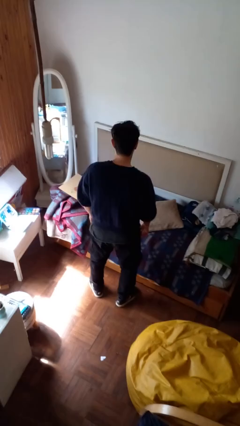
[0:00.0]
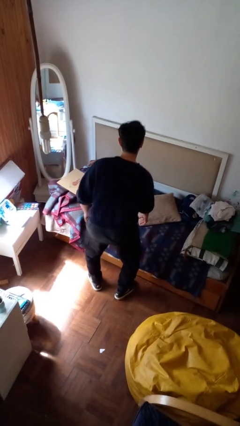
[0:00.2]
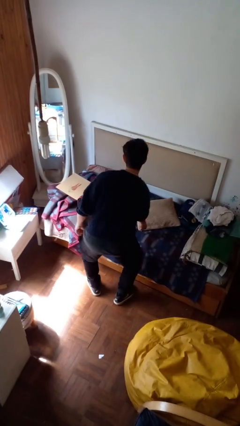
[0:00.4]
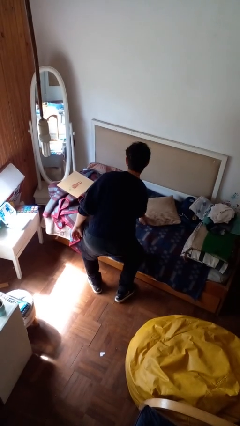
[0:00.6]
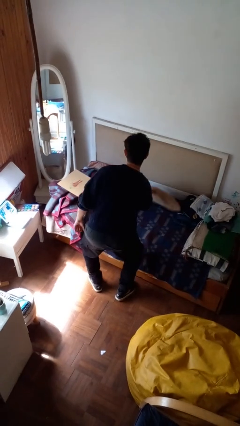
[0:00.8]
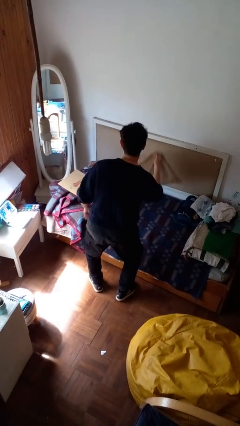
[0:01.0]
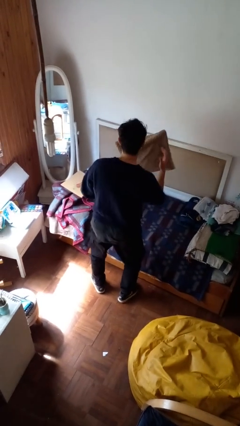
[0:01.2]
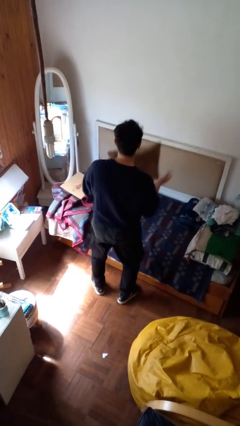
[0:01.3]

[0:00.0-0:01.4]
person picks up object from bed

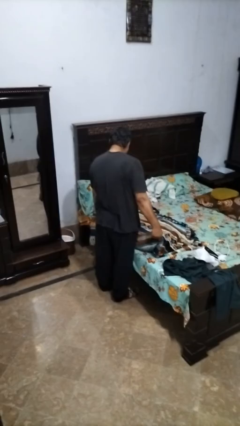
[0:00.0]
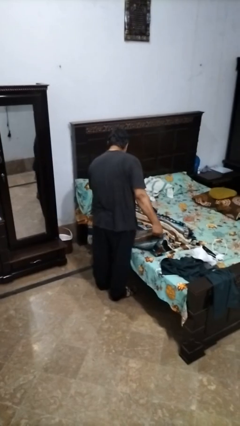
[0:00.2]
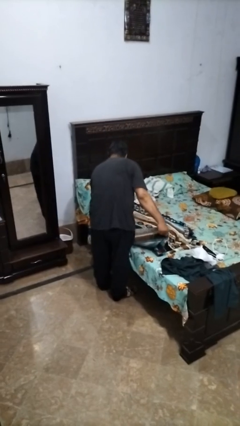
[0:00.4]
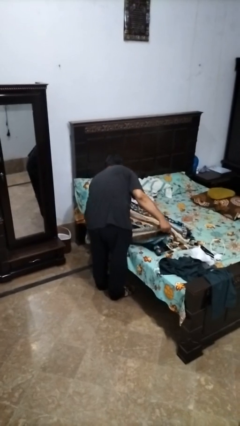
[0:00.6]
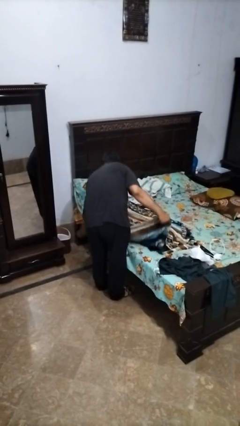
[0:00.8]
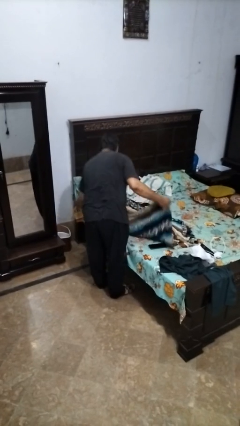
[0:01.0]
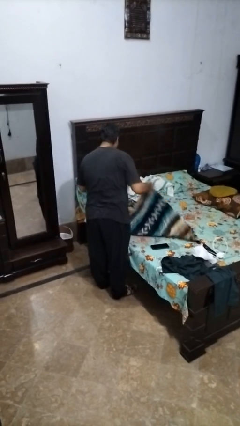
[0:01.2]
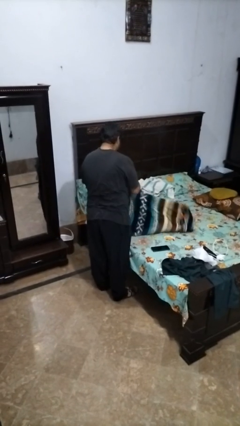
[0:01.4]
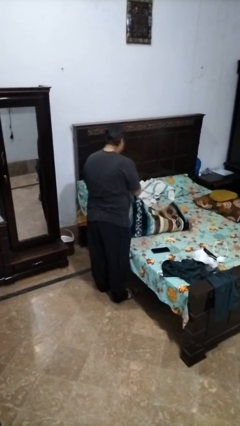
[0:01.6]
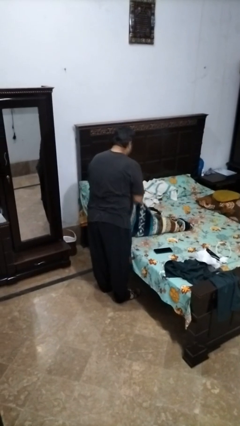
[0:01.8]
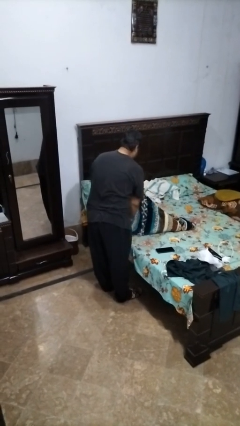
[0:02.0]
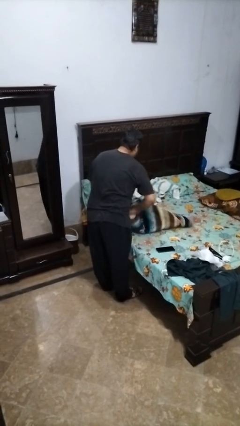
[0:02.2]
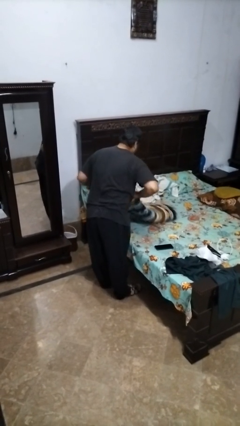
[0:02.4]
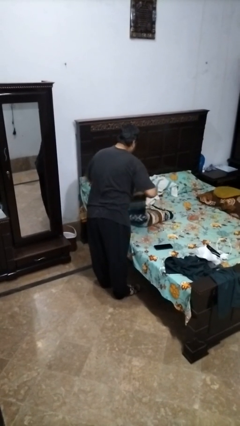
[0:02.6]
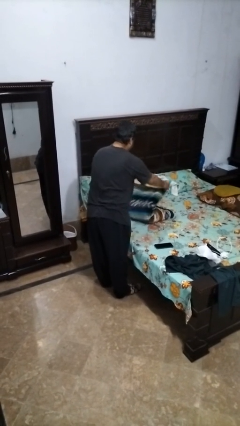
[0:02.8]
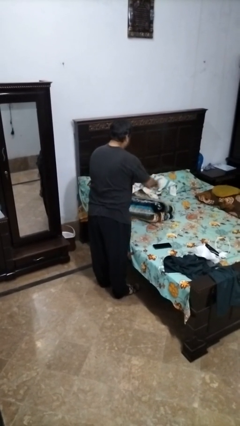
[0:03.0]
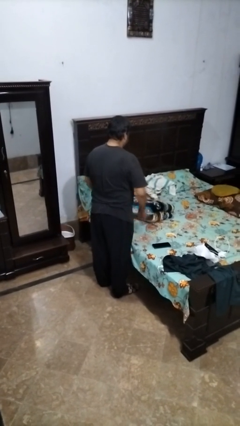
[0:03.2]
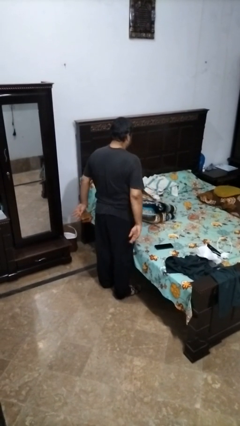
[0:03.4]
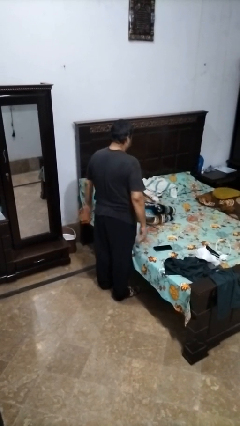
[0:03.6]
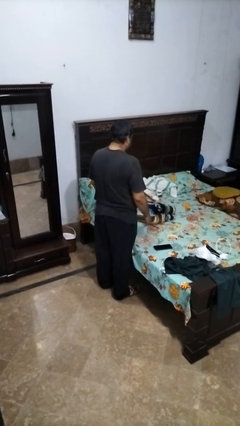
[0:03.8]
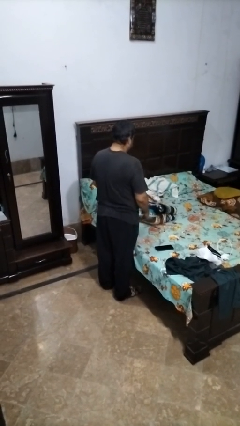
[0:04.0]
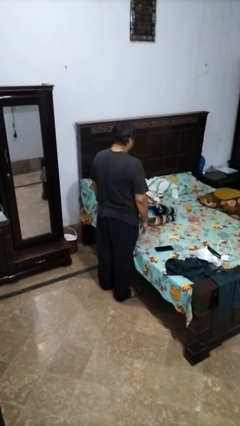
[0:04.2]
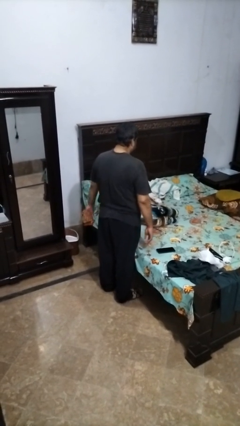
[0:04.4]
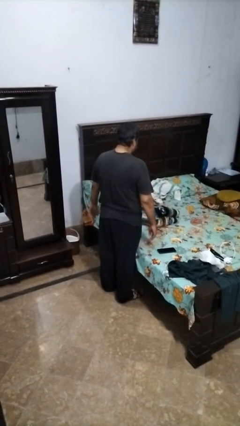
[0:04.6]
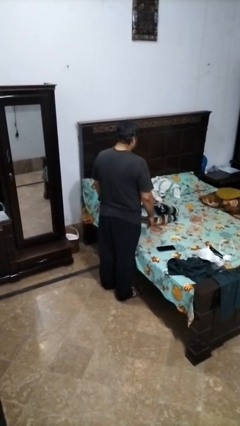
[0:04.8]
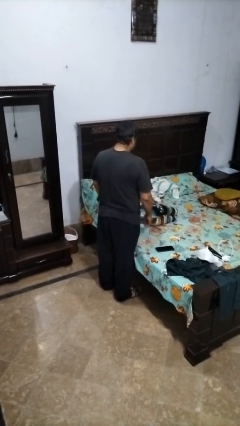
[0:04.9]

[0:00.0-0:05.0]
person folds blanket

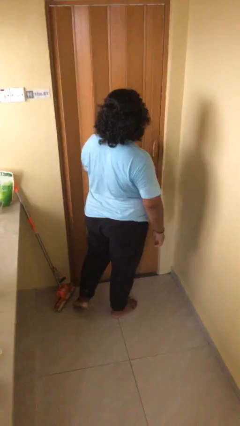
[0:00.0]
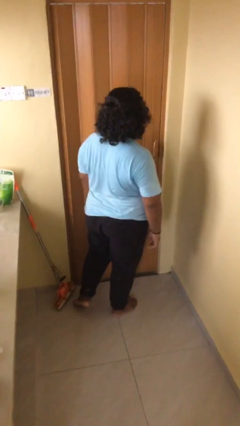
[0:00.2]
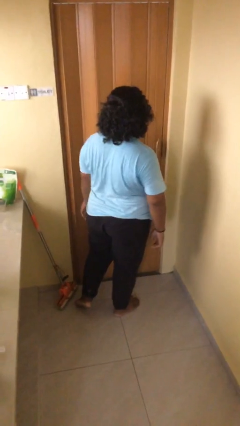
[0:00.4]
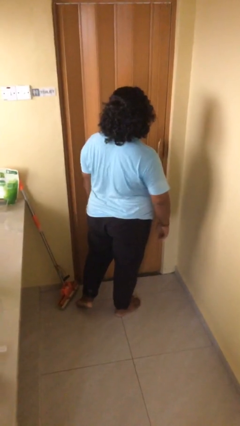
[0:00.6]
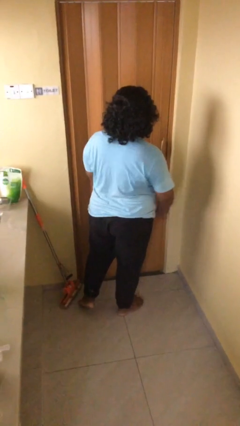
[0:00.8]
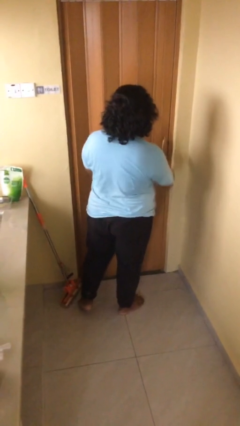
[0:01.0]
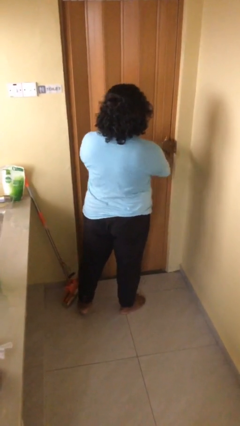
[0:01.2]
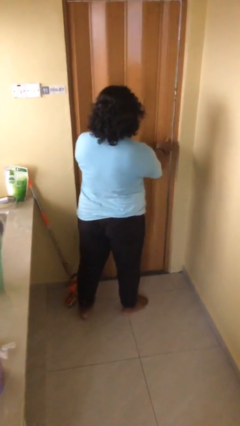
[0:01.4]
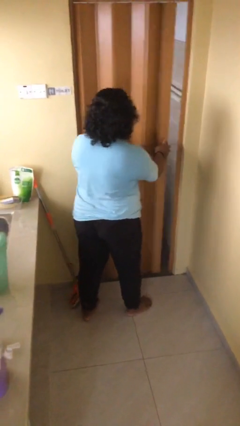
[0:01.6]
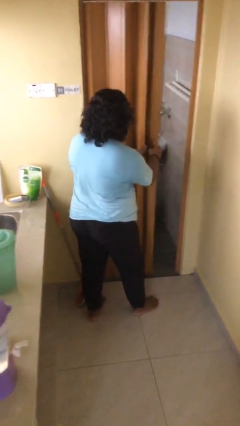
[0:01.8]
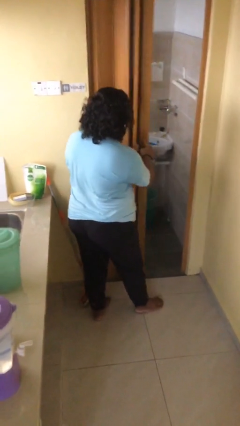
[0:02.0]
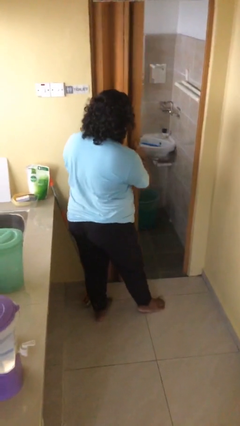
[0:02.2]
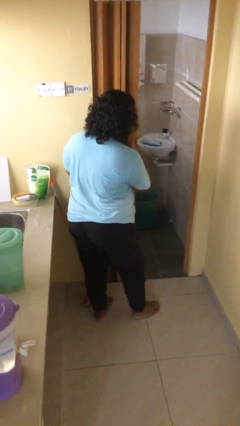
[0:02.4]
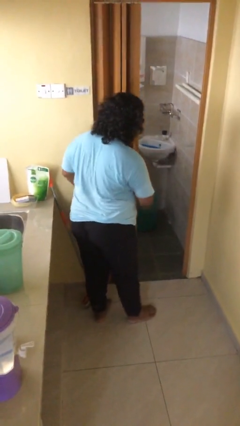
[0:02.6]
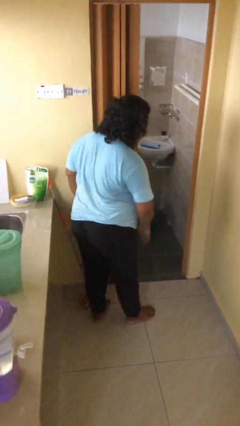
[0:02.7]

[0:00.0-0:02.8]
person opens sliding door

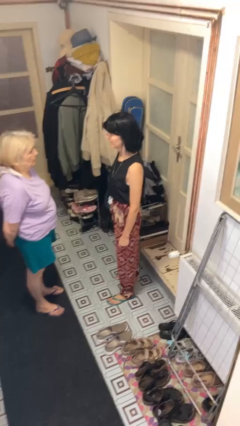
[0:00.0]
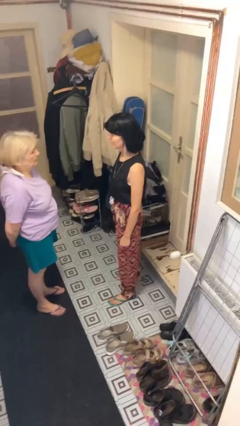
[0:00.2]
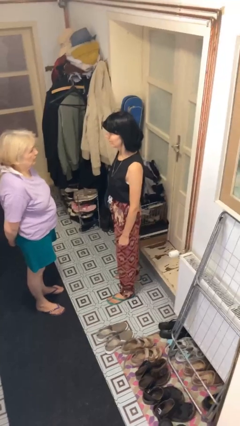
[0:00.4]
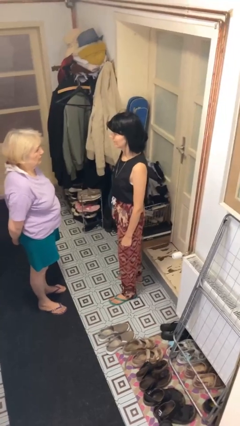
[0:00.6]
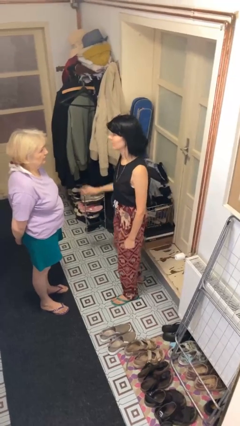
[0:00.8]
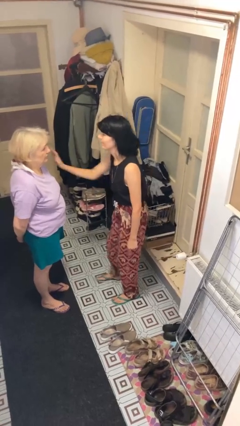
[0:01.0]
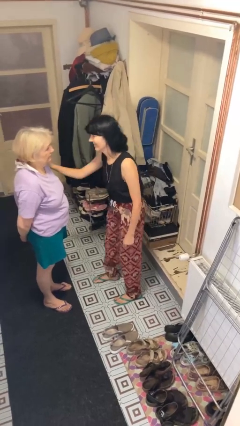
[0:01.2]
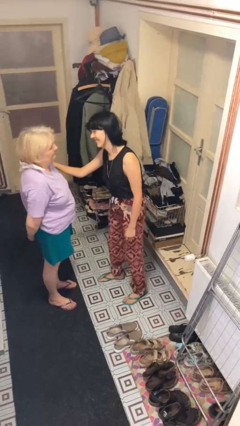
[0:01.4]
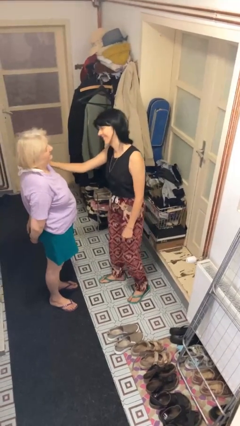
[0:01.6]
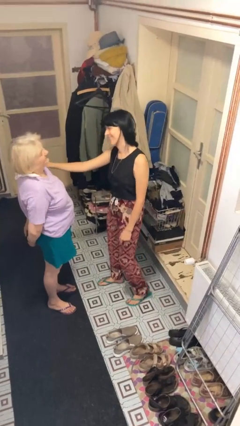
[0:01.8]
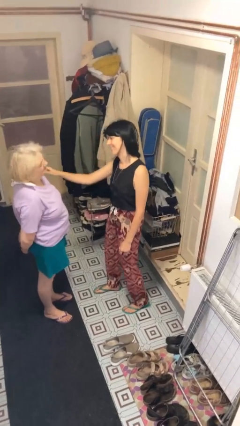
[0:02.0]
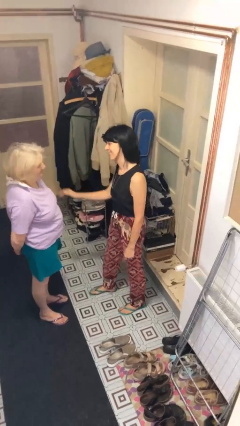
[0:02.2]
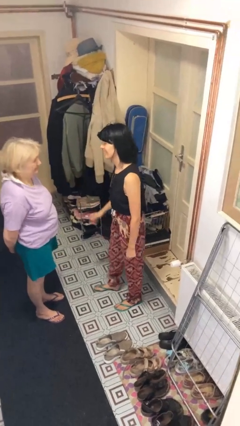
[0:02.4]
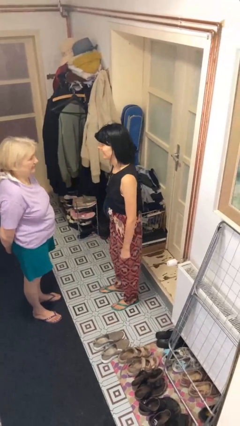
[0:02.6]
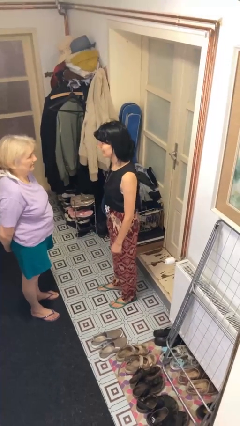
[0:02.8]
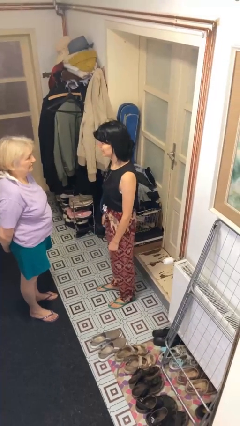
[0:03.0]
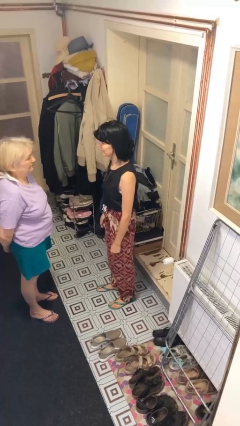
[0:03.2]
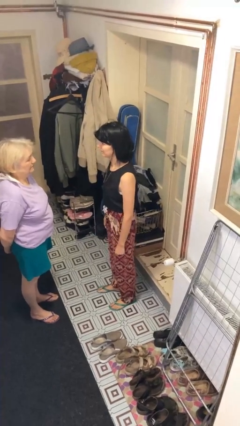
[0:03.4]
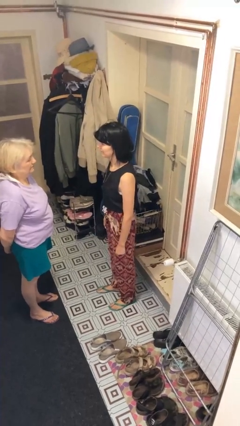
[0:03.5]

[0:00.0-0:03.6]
person shoves person

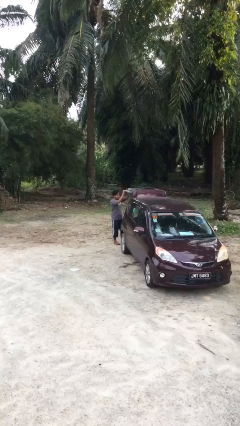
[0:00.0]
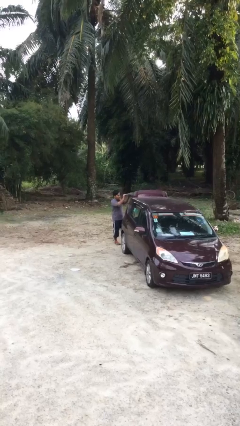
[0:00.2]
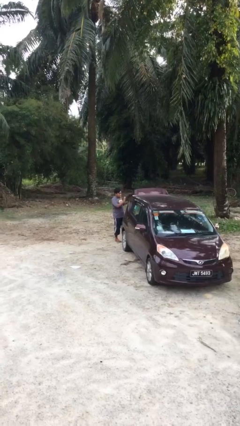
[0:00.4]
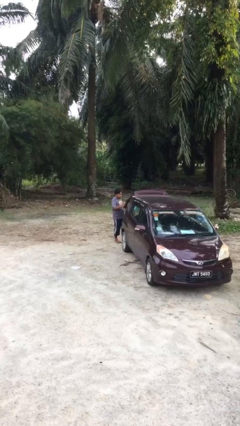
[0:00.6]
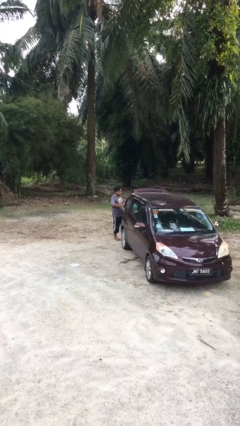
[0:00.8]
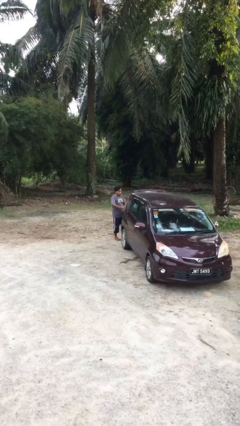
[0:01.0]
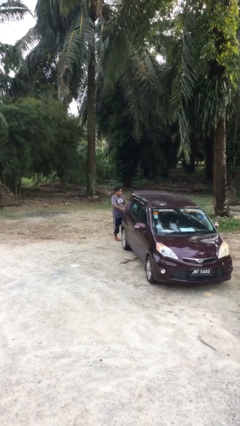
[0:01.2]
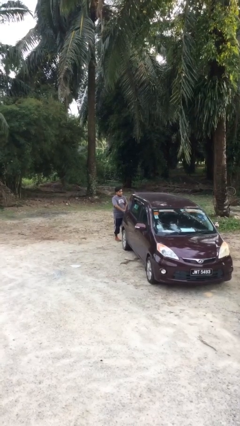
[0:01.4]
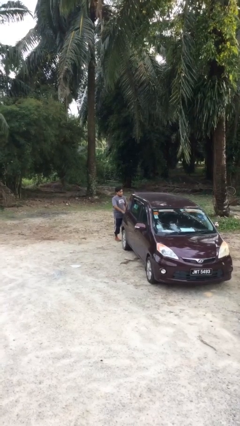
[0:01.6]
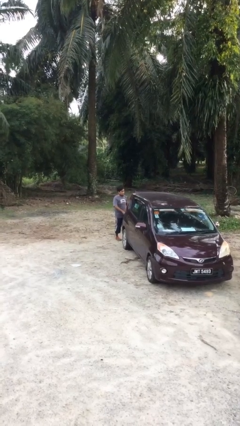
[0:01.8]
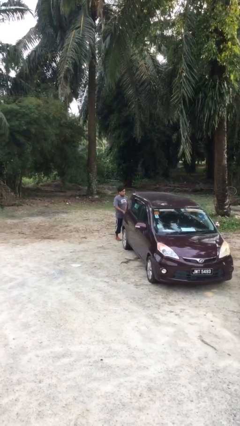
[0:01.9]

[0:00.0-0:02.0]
person closes car trunk

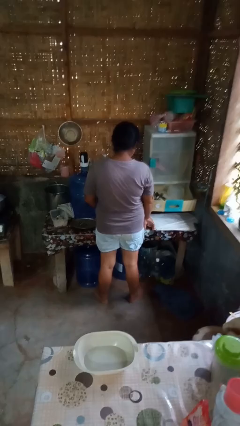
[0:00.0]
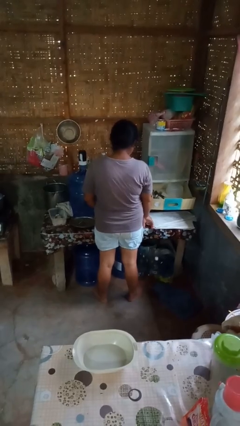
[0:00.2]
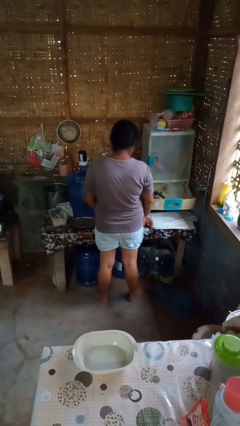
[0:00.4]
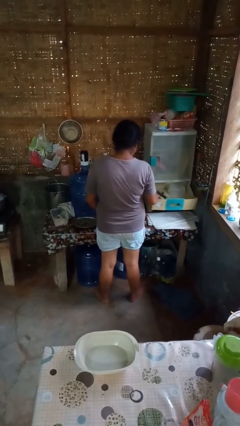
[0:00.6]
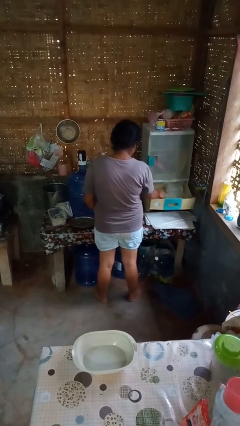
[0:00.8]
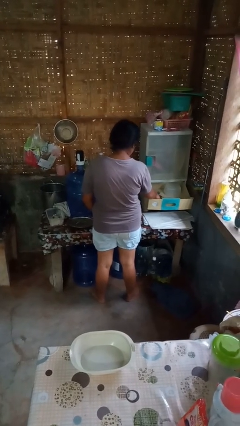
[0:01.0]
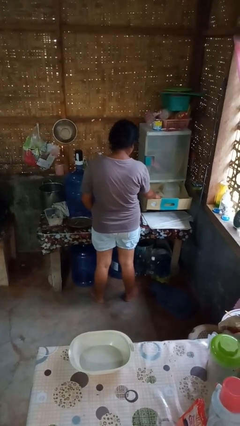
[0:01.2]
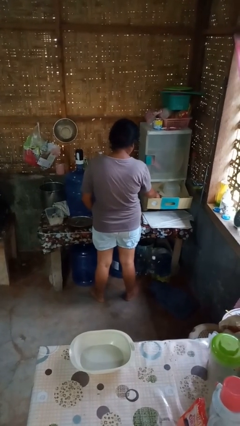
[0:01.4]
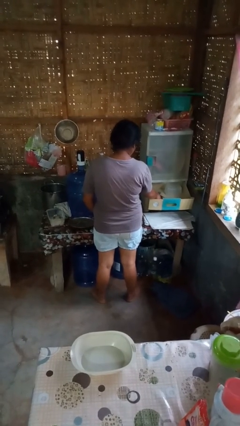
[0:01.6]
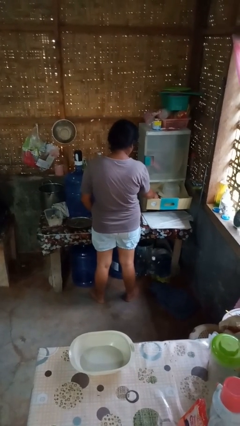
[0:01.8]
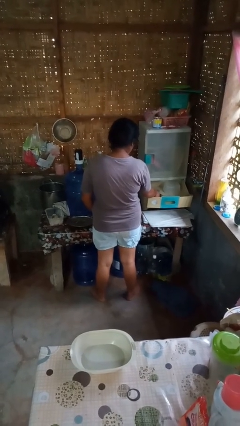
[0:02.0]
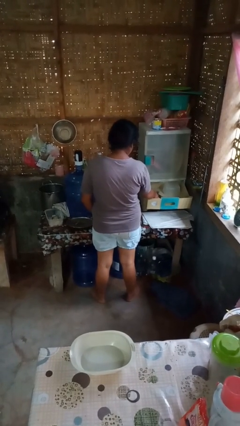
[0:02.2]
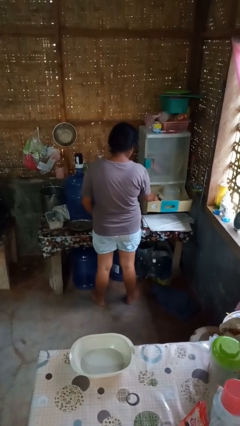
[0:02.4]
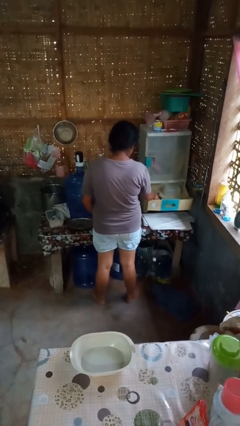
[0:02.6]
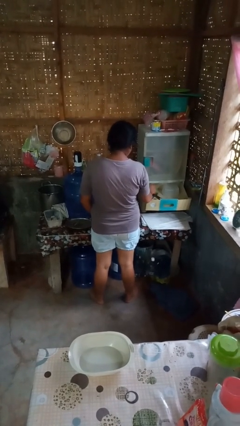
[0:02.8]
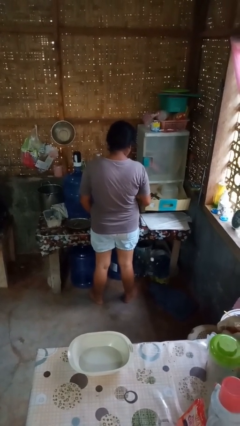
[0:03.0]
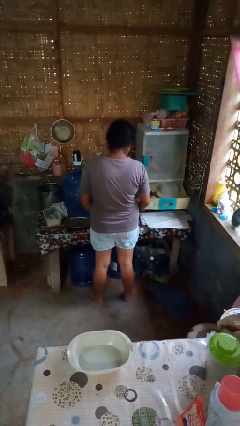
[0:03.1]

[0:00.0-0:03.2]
person searches in kitchen drawer
